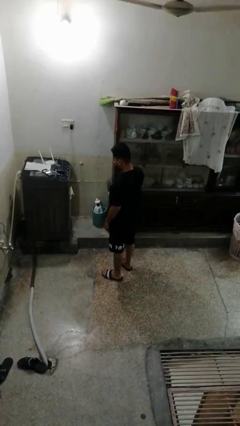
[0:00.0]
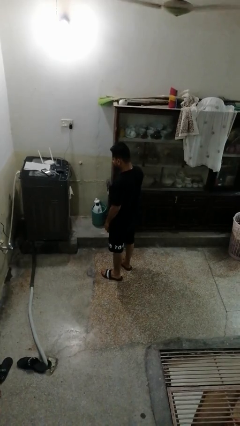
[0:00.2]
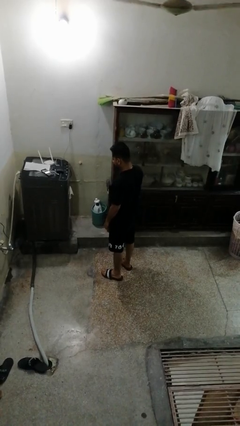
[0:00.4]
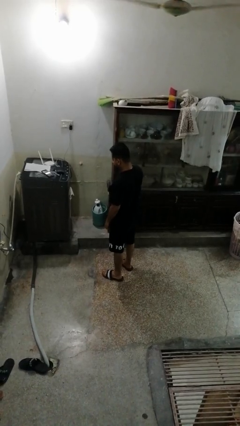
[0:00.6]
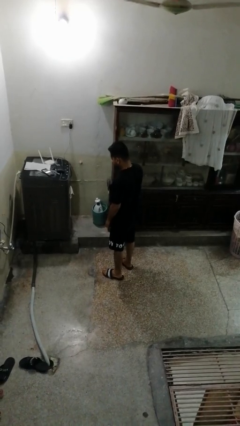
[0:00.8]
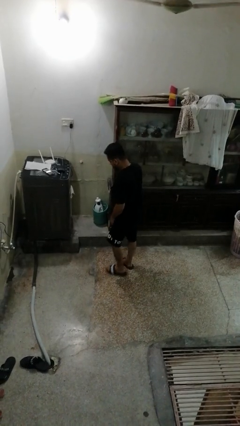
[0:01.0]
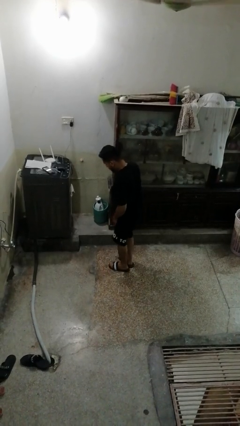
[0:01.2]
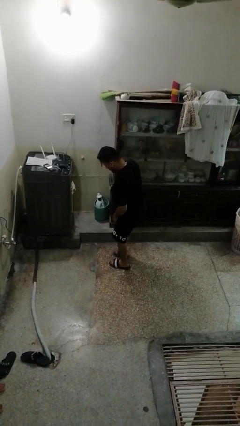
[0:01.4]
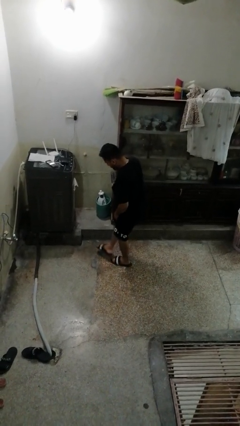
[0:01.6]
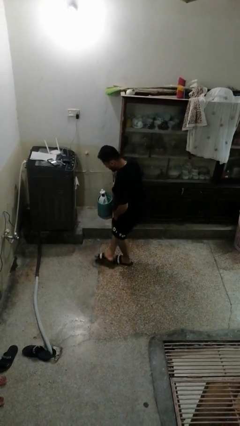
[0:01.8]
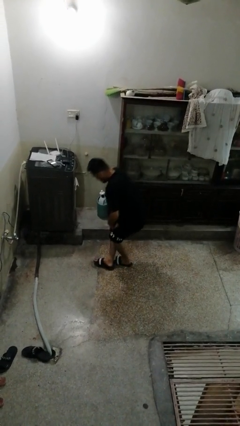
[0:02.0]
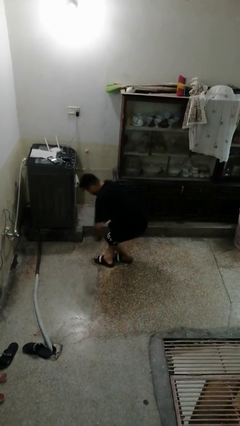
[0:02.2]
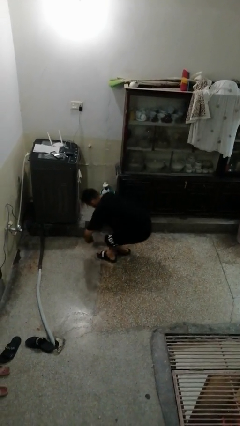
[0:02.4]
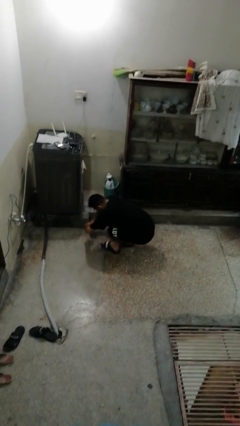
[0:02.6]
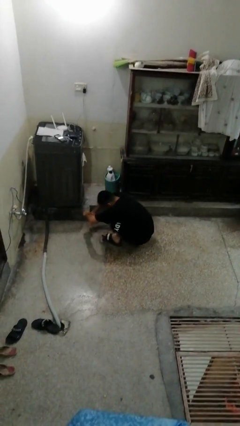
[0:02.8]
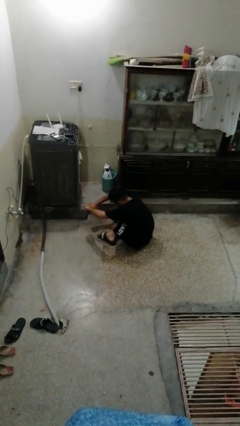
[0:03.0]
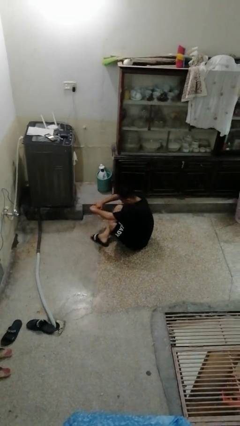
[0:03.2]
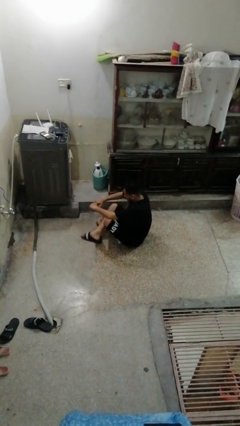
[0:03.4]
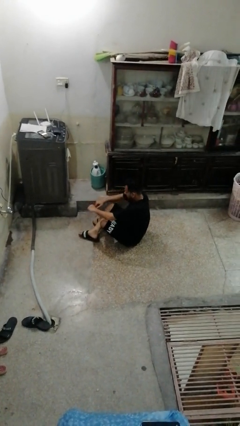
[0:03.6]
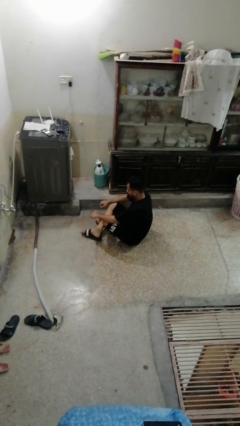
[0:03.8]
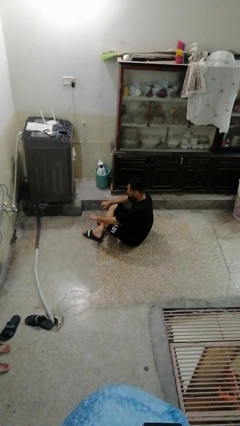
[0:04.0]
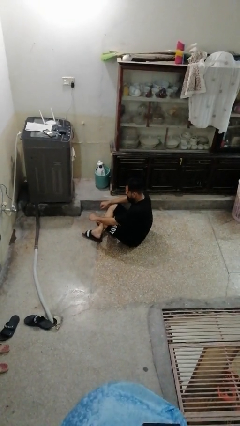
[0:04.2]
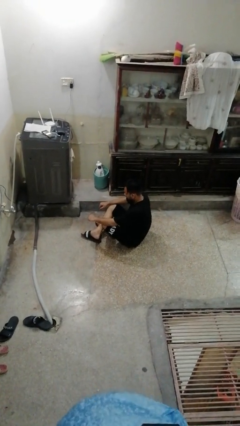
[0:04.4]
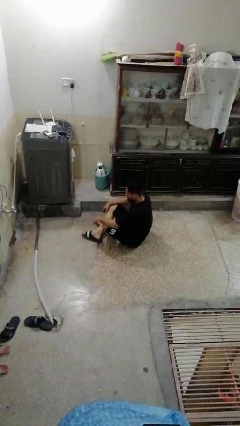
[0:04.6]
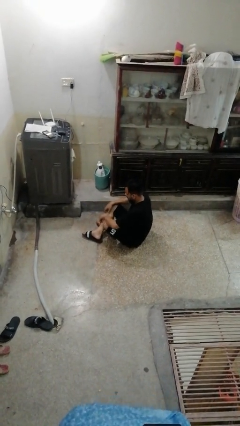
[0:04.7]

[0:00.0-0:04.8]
person sits crisscross

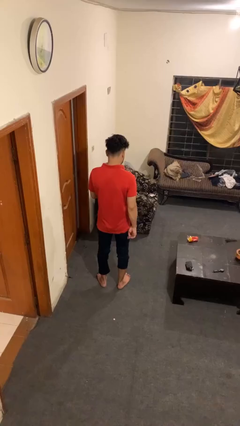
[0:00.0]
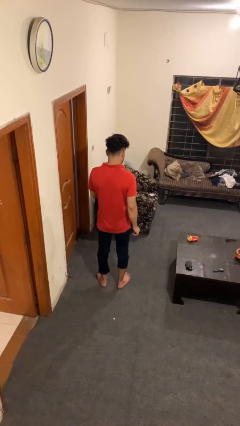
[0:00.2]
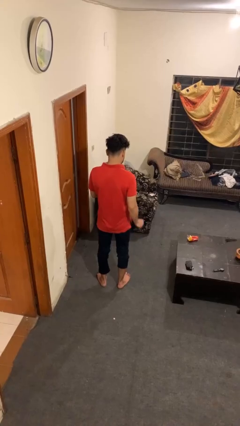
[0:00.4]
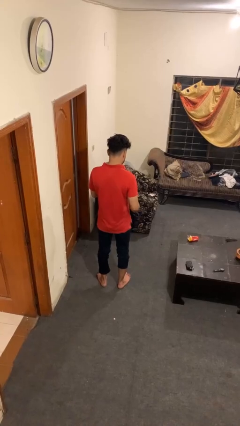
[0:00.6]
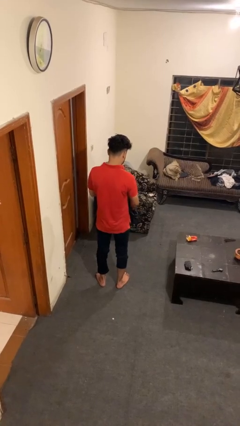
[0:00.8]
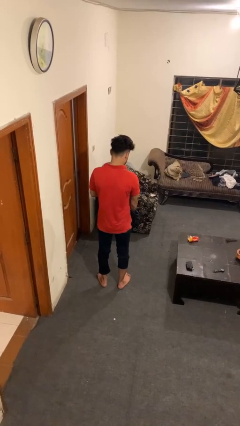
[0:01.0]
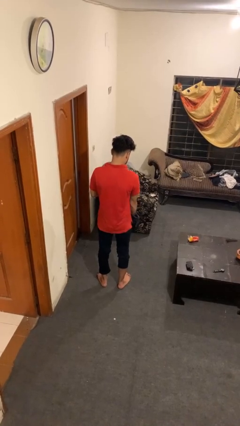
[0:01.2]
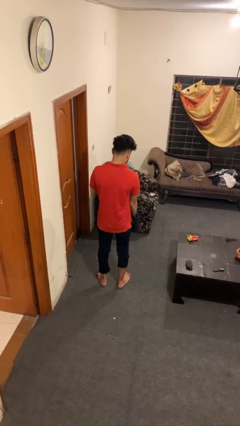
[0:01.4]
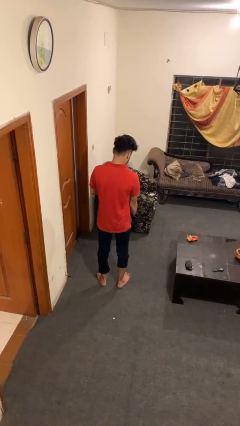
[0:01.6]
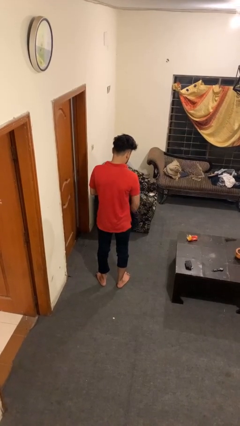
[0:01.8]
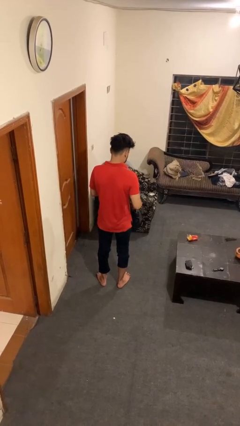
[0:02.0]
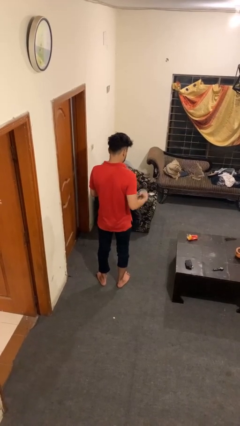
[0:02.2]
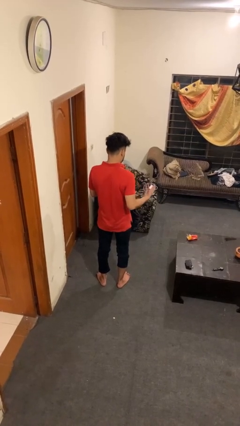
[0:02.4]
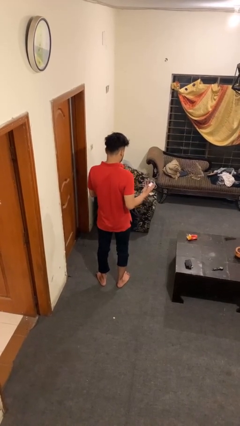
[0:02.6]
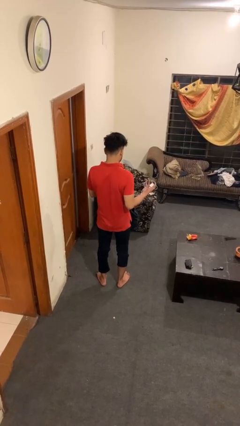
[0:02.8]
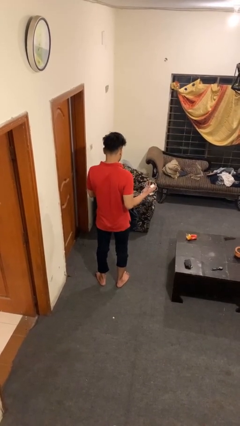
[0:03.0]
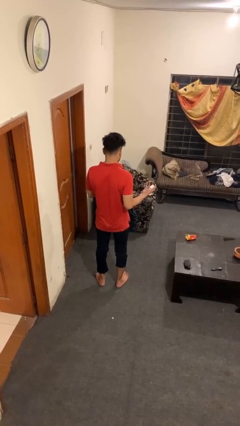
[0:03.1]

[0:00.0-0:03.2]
person takes object from bag

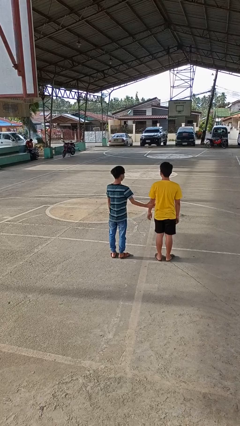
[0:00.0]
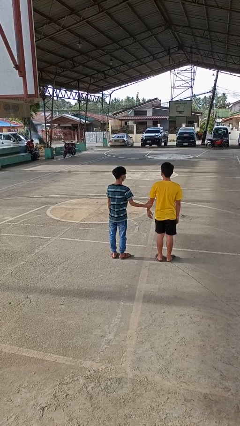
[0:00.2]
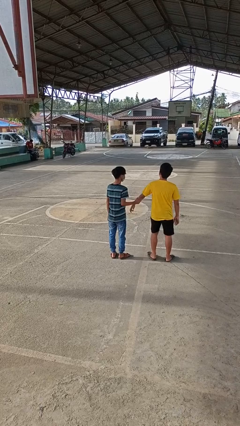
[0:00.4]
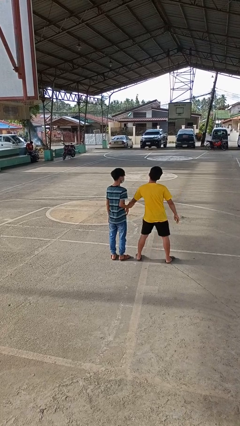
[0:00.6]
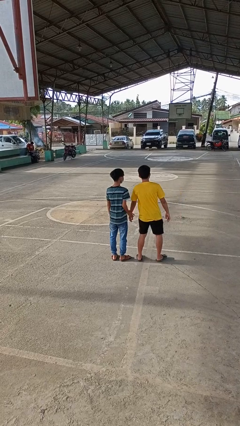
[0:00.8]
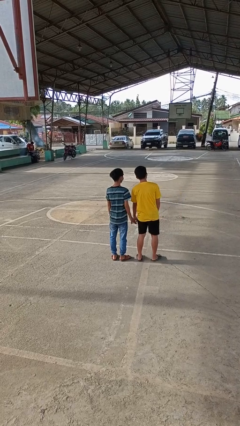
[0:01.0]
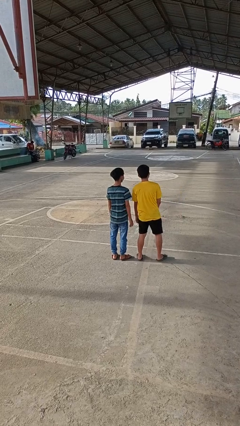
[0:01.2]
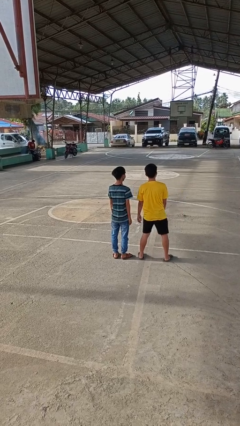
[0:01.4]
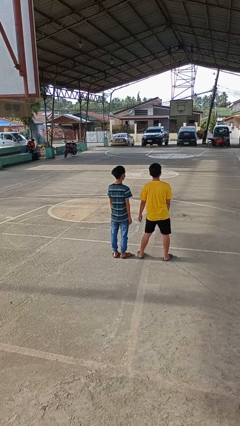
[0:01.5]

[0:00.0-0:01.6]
person grabs person by forearm

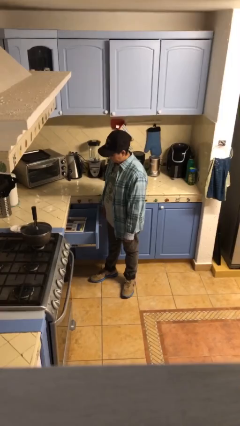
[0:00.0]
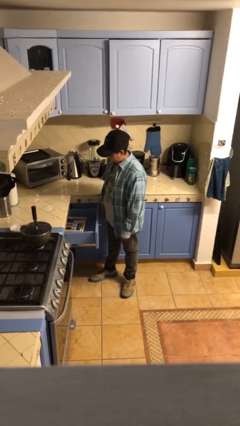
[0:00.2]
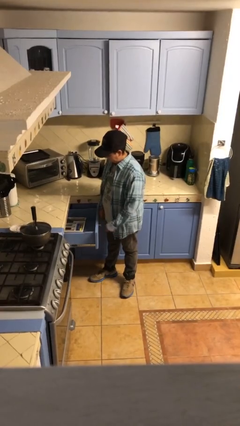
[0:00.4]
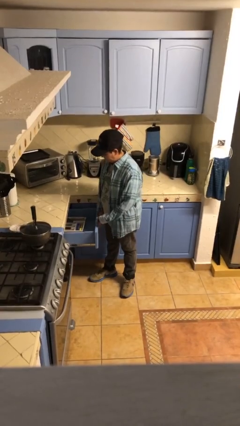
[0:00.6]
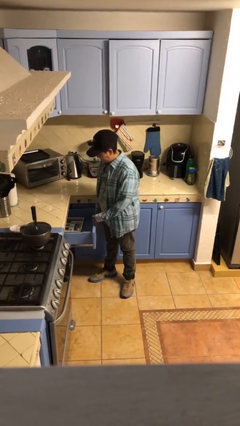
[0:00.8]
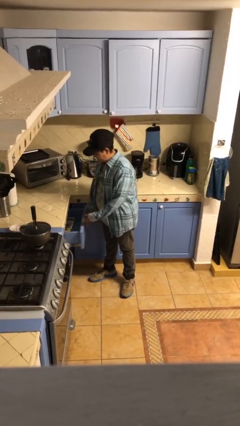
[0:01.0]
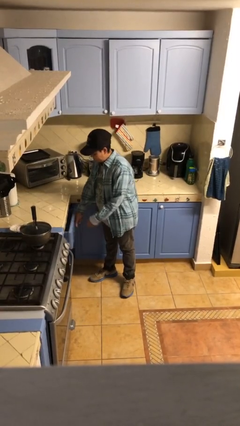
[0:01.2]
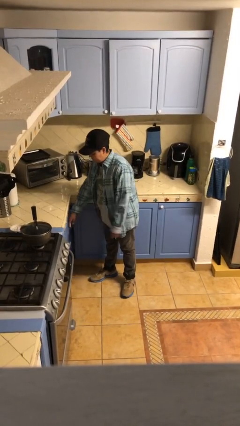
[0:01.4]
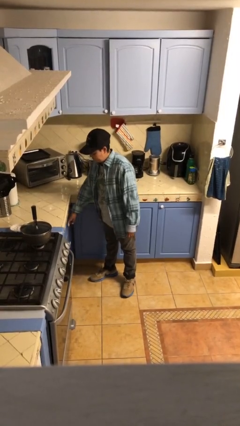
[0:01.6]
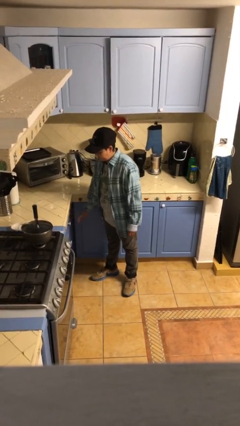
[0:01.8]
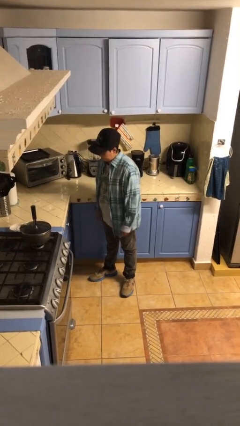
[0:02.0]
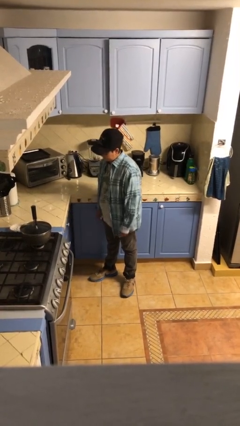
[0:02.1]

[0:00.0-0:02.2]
person closes kitchen drawer

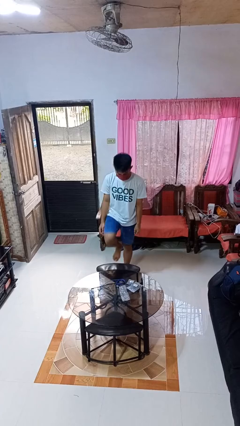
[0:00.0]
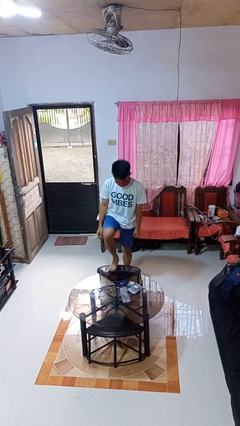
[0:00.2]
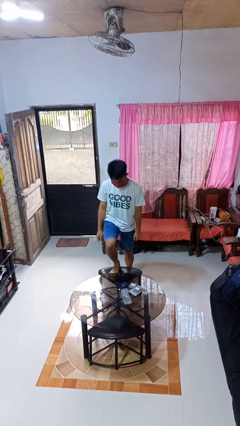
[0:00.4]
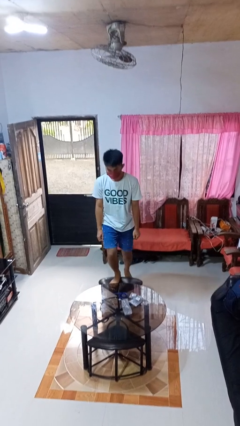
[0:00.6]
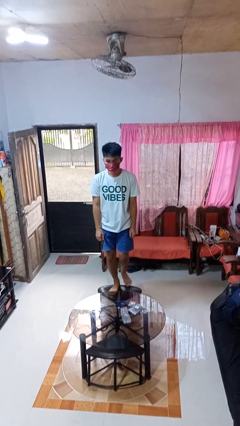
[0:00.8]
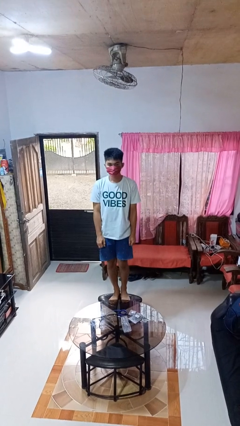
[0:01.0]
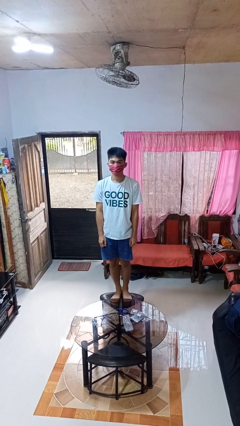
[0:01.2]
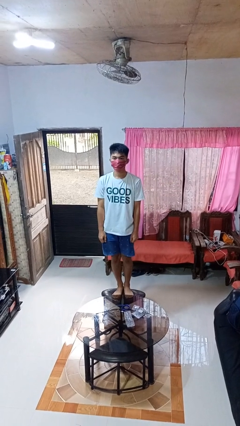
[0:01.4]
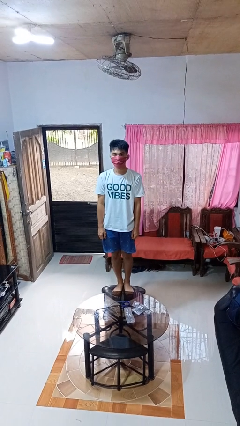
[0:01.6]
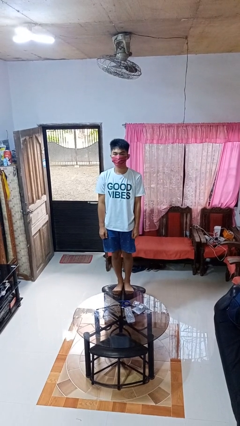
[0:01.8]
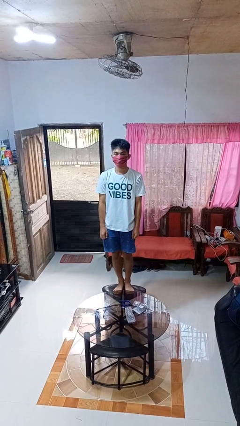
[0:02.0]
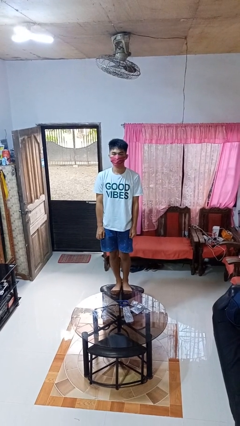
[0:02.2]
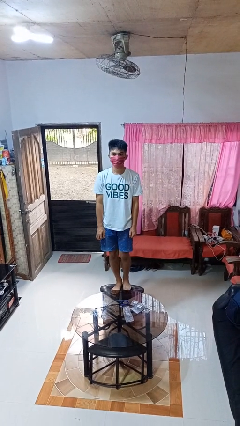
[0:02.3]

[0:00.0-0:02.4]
person climbs on chair

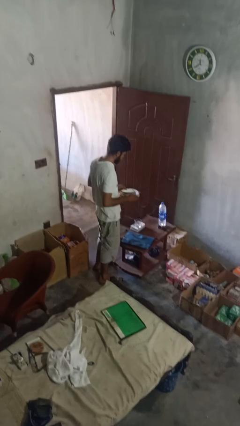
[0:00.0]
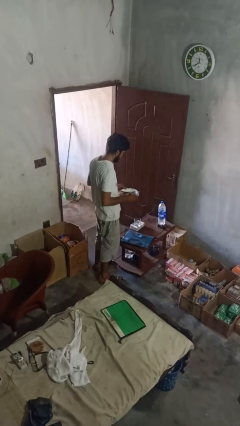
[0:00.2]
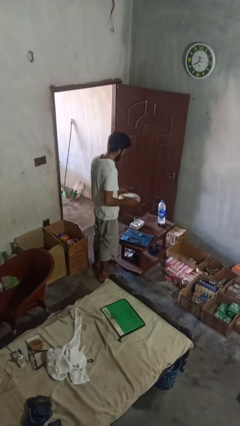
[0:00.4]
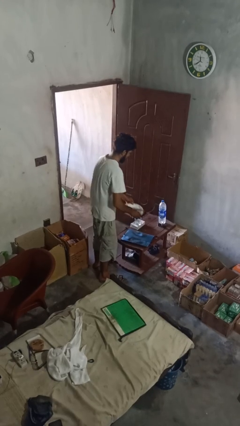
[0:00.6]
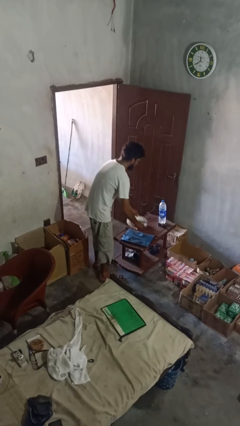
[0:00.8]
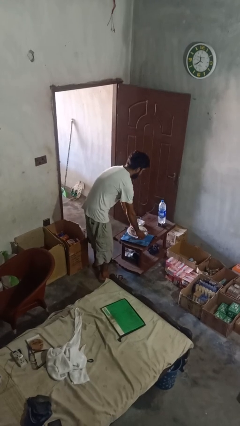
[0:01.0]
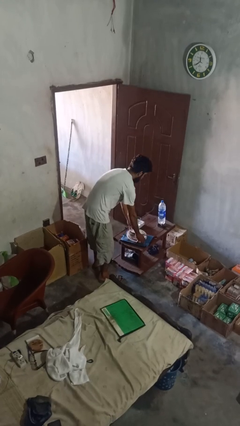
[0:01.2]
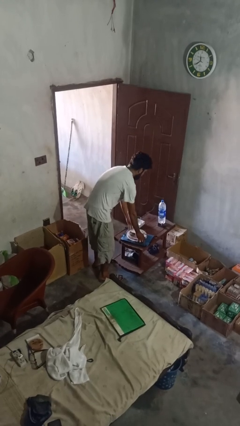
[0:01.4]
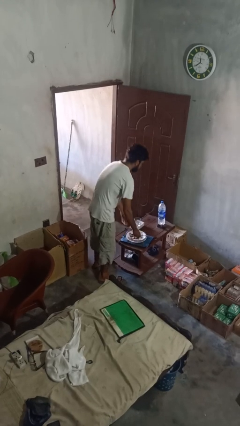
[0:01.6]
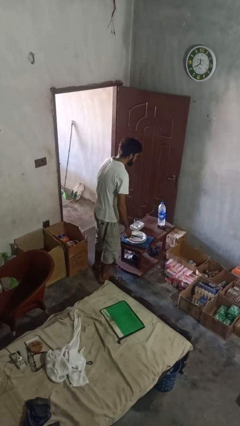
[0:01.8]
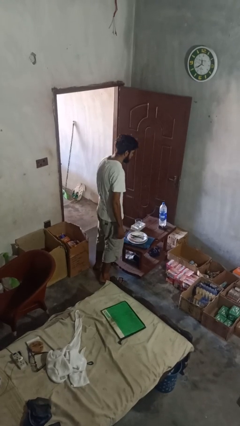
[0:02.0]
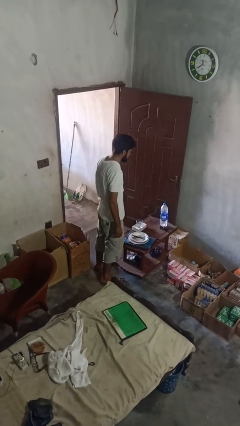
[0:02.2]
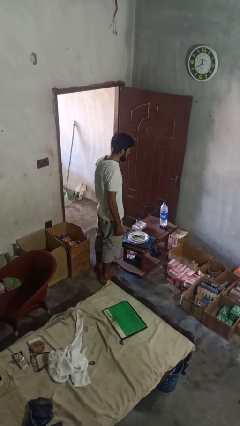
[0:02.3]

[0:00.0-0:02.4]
person puts down object on countertop

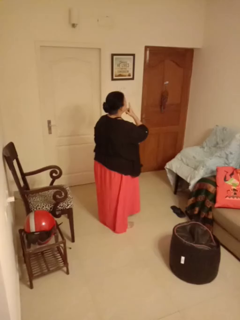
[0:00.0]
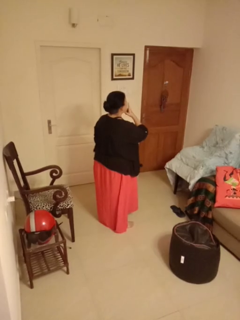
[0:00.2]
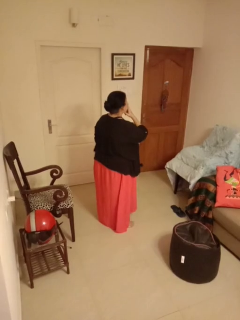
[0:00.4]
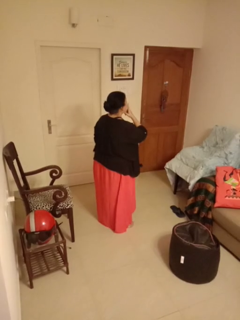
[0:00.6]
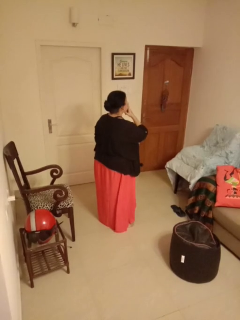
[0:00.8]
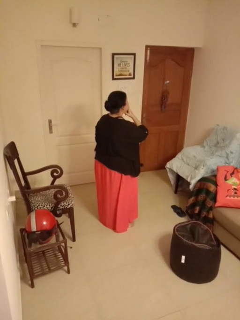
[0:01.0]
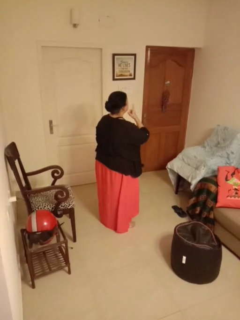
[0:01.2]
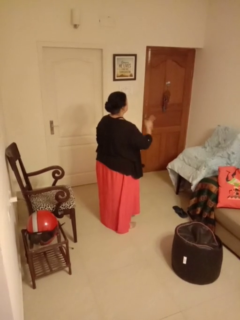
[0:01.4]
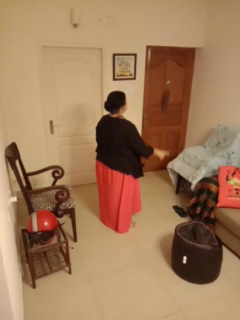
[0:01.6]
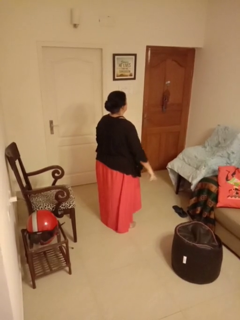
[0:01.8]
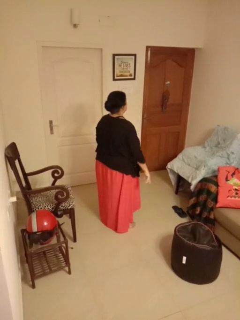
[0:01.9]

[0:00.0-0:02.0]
person gestures be quiet
